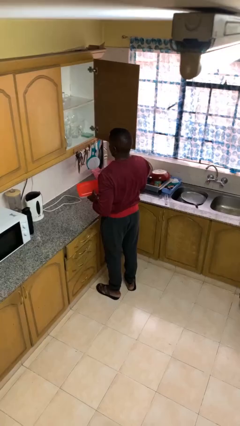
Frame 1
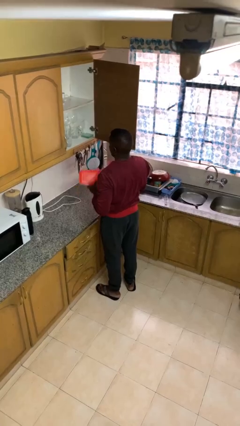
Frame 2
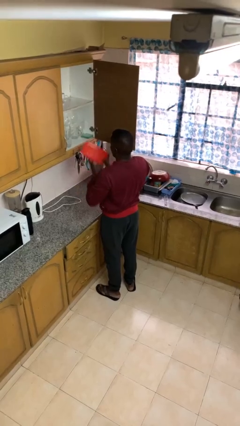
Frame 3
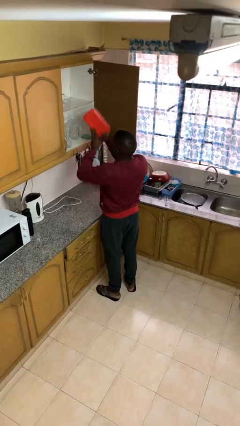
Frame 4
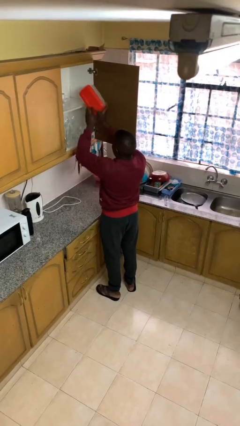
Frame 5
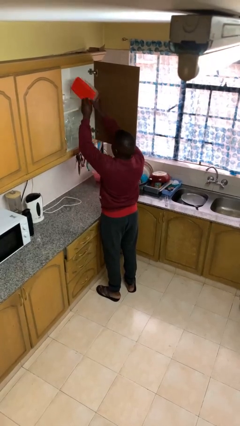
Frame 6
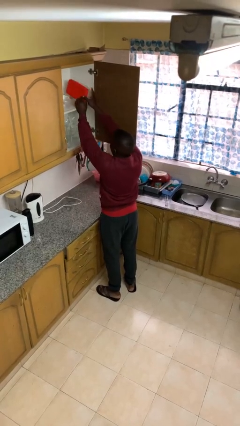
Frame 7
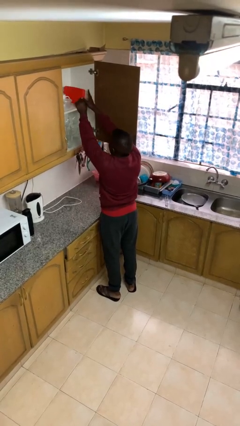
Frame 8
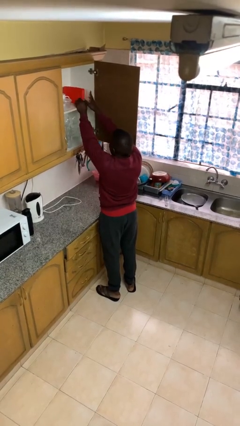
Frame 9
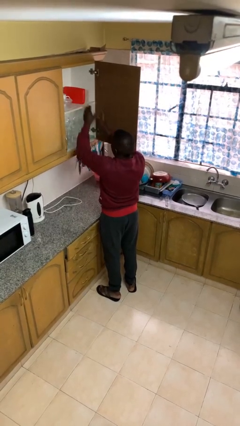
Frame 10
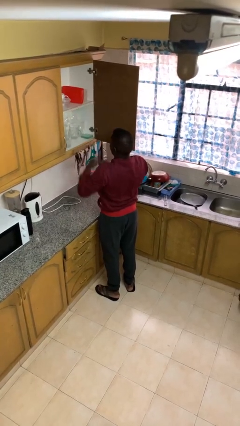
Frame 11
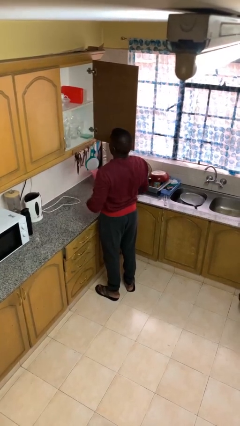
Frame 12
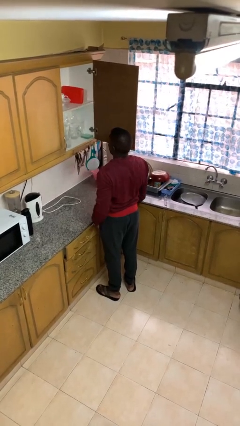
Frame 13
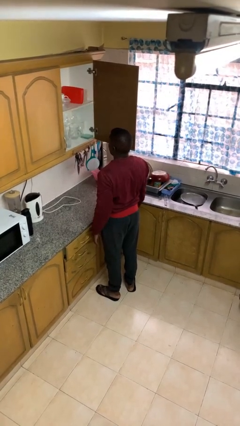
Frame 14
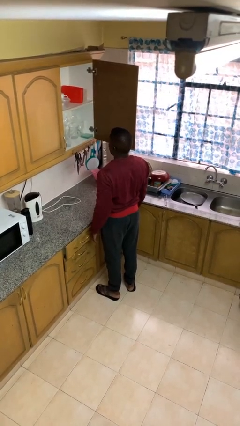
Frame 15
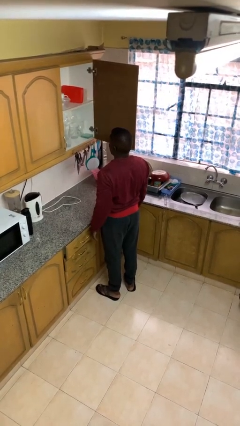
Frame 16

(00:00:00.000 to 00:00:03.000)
person puts down object into cabinet

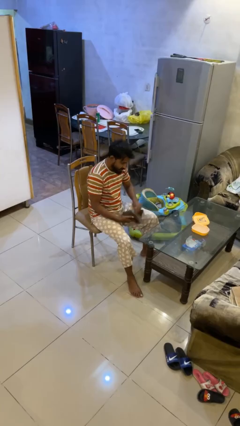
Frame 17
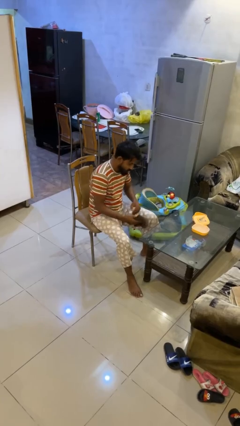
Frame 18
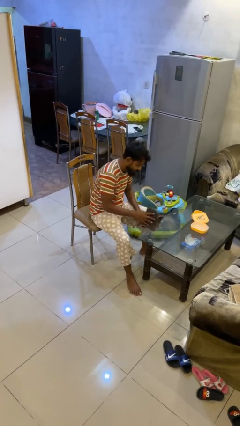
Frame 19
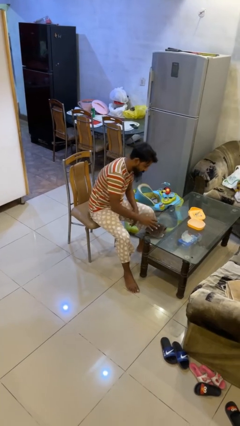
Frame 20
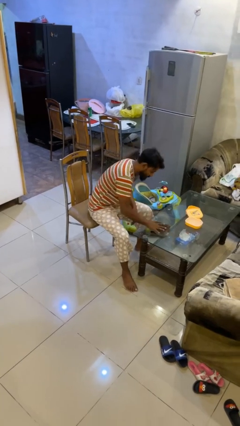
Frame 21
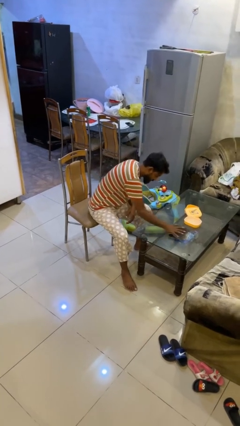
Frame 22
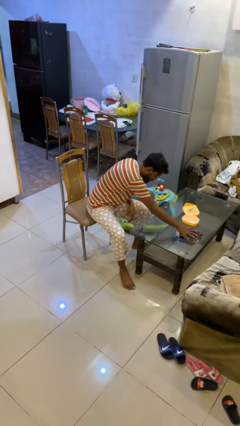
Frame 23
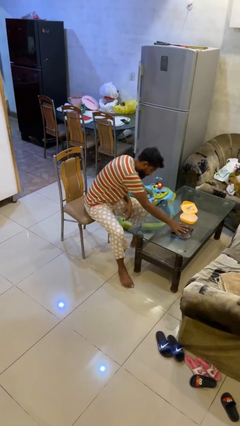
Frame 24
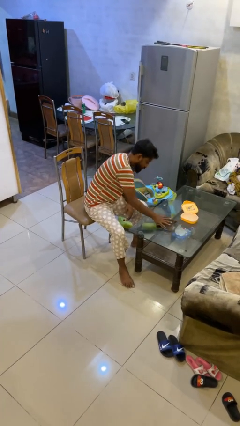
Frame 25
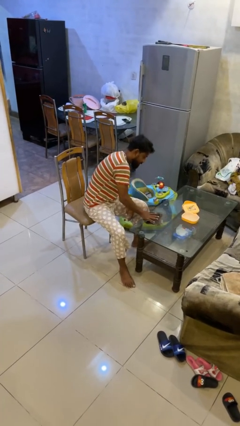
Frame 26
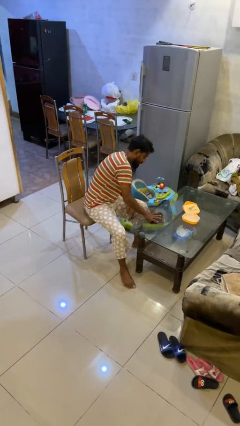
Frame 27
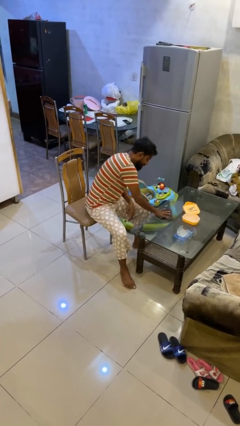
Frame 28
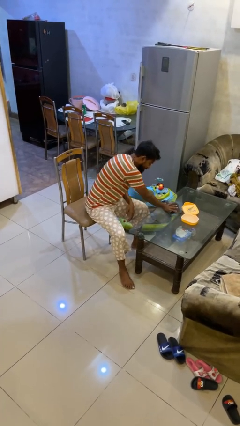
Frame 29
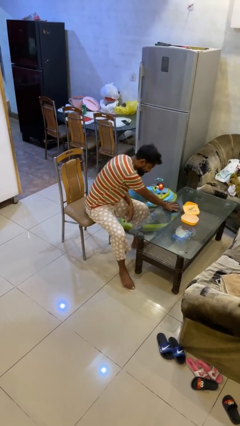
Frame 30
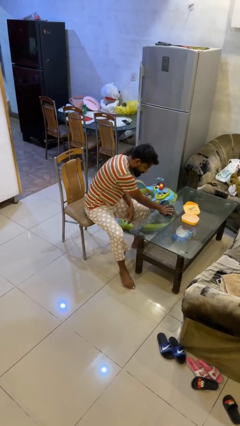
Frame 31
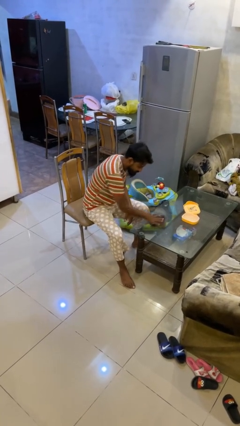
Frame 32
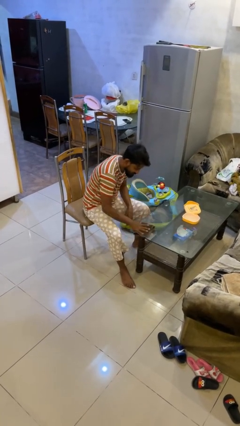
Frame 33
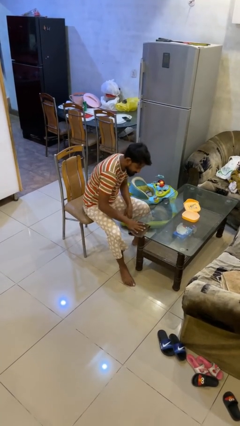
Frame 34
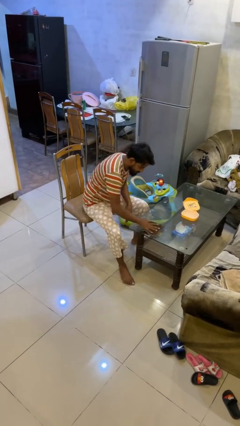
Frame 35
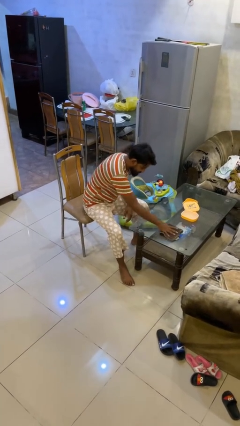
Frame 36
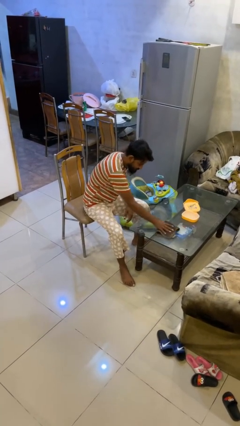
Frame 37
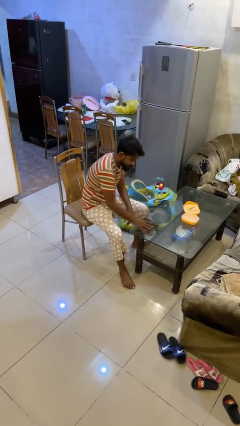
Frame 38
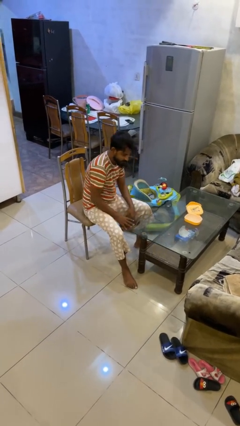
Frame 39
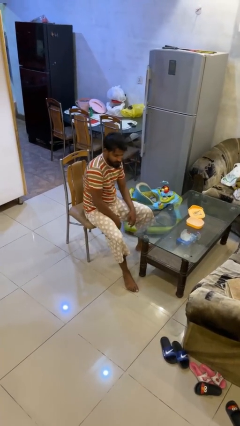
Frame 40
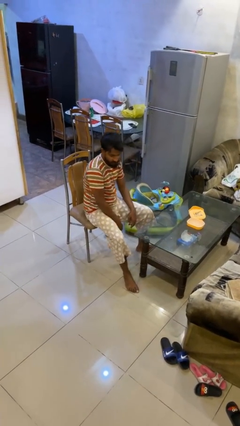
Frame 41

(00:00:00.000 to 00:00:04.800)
person cleans table with rag

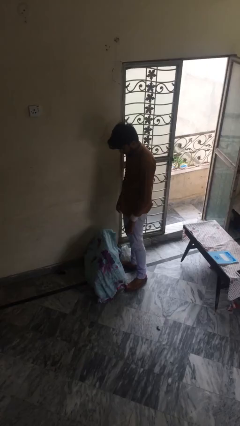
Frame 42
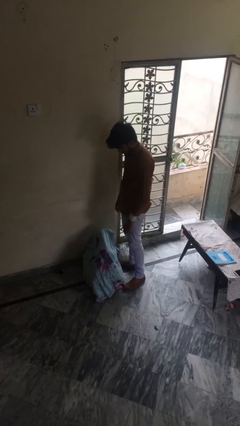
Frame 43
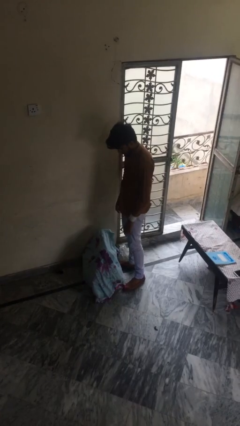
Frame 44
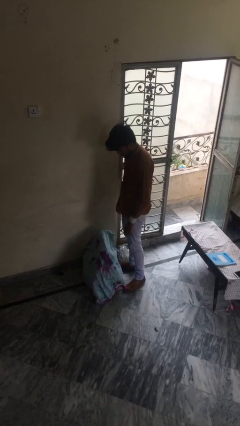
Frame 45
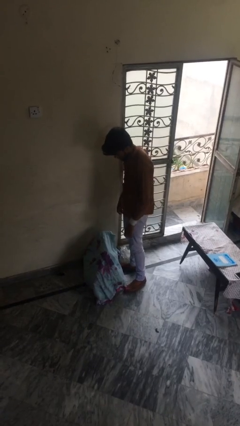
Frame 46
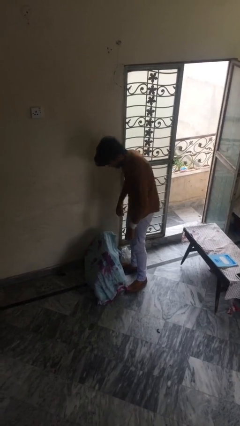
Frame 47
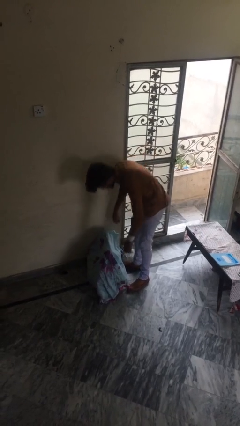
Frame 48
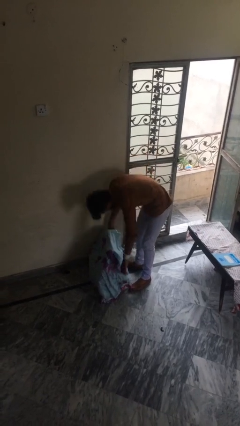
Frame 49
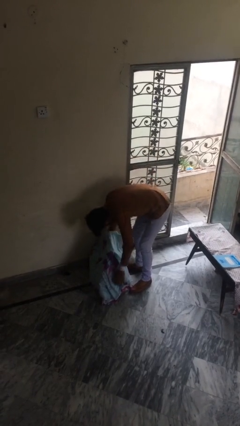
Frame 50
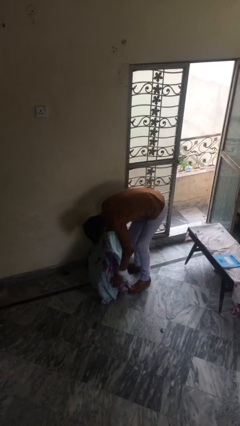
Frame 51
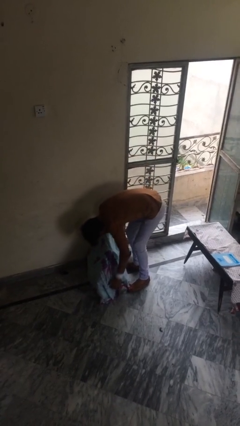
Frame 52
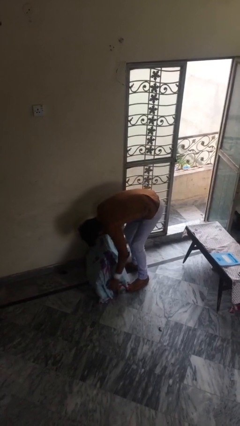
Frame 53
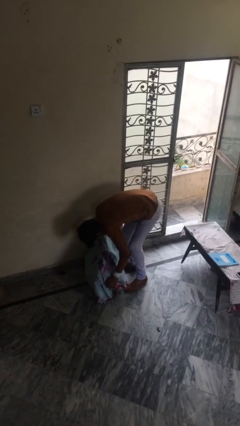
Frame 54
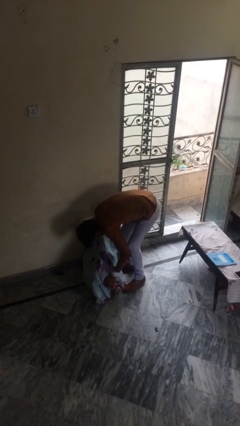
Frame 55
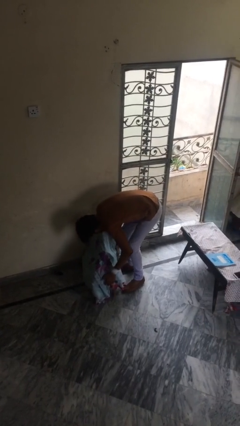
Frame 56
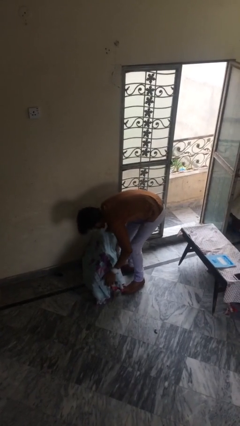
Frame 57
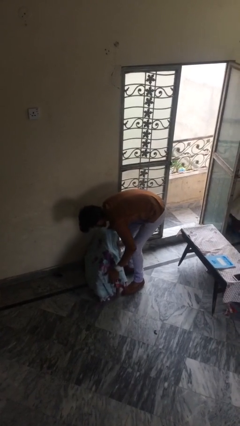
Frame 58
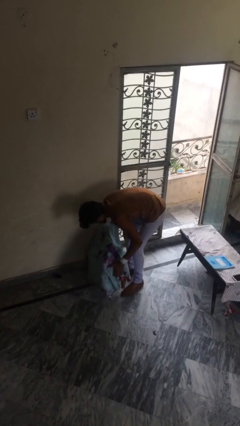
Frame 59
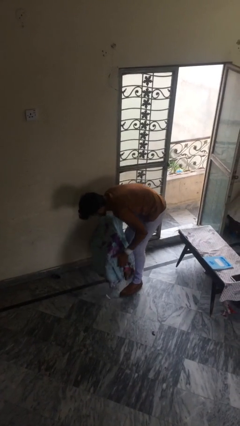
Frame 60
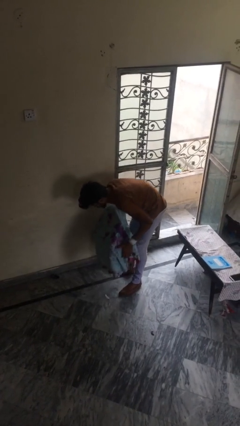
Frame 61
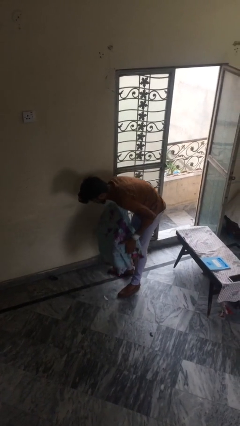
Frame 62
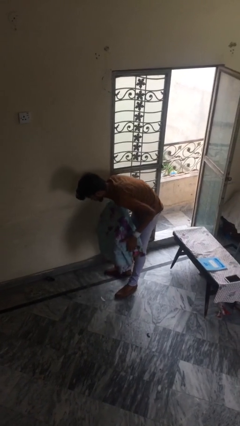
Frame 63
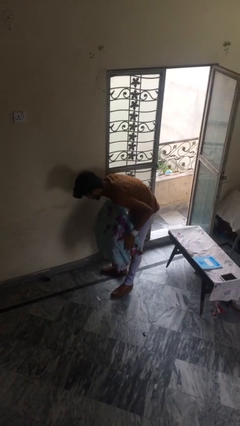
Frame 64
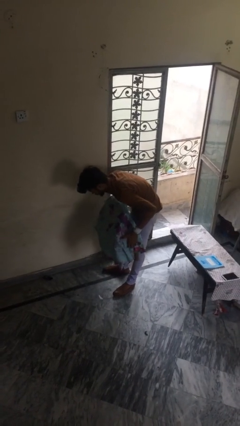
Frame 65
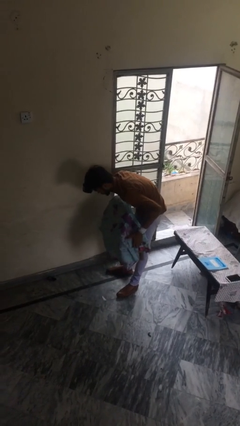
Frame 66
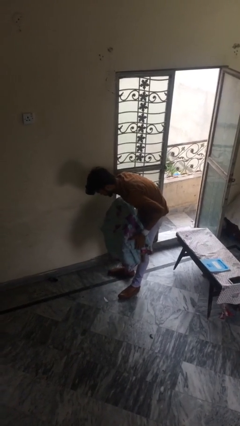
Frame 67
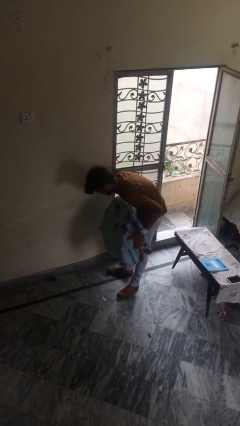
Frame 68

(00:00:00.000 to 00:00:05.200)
person picks up object from floor

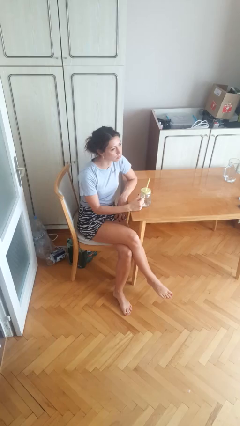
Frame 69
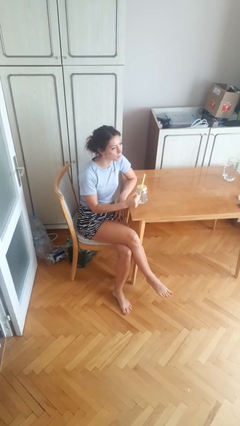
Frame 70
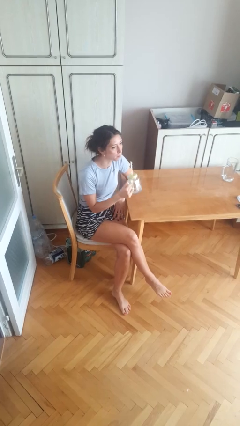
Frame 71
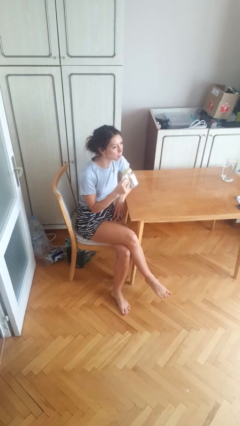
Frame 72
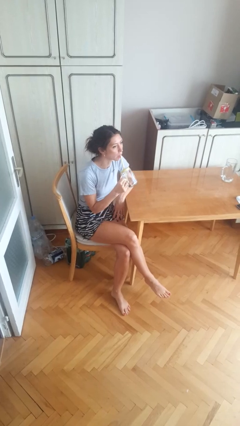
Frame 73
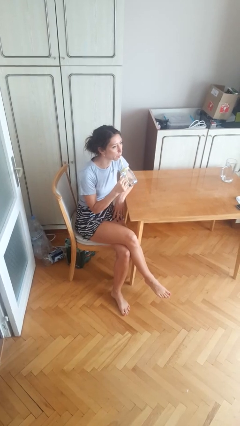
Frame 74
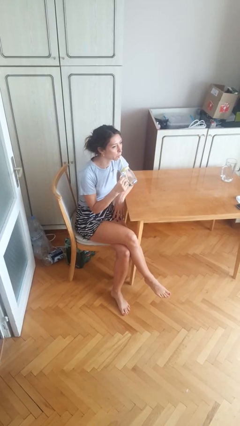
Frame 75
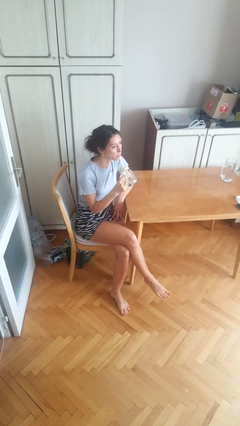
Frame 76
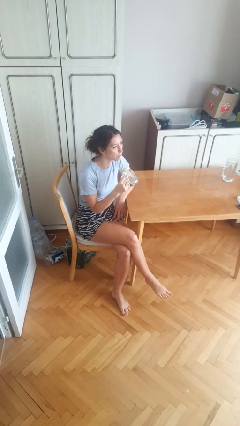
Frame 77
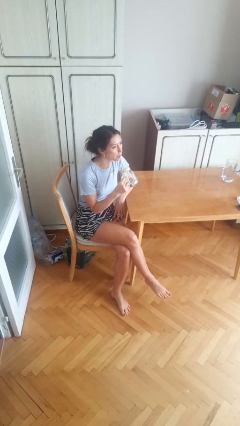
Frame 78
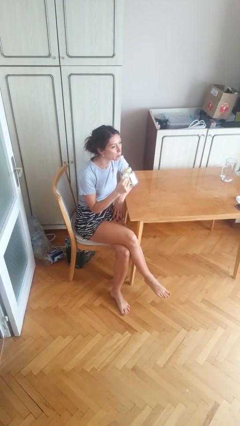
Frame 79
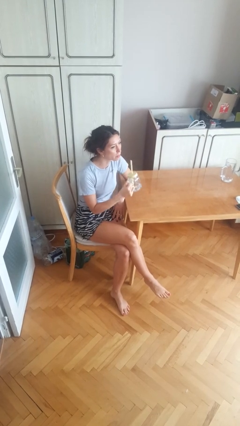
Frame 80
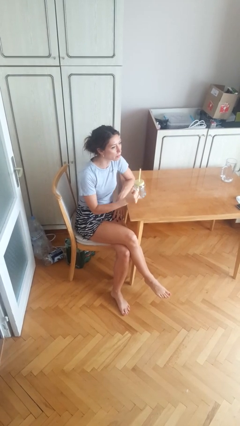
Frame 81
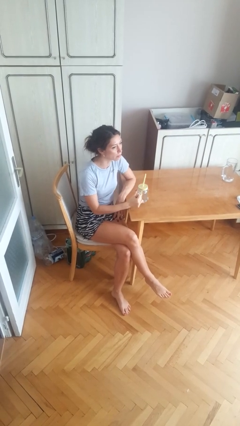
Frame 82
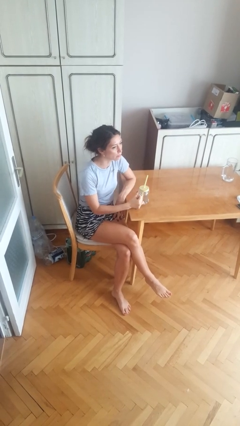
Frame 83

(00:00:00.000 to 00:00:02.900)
person drinks from straw

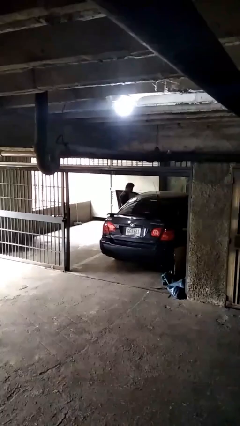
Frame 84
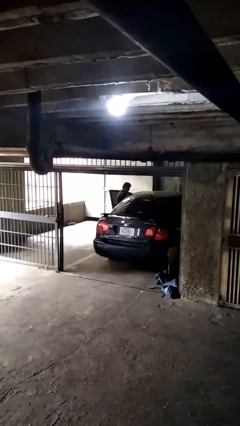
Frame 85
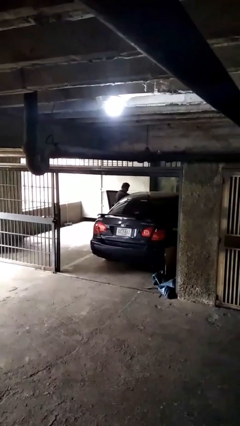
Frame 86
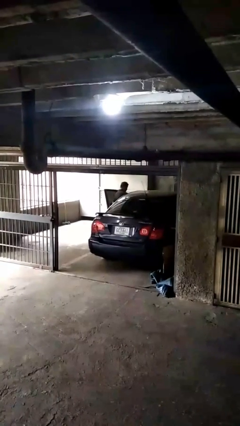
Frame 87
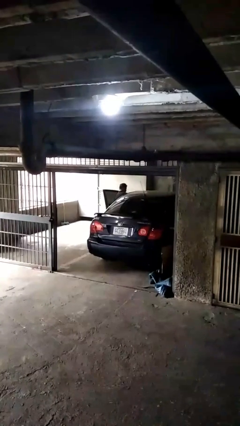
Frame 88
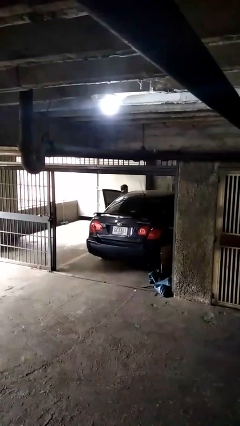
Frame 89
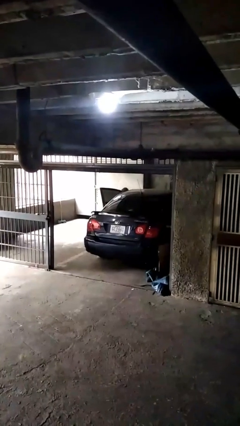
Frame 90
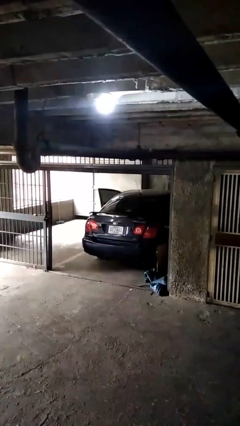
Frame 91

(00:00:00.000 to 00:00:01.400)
person enters car
